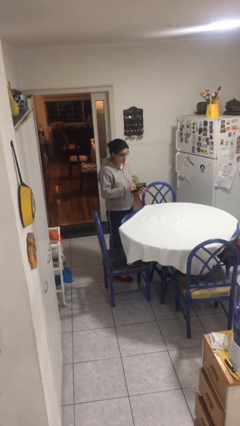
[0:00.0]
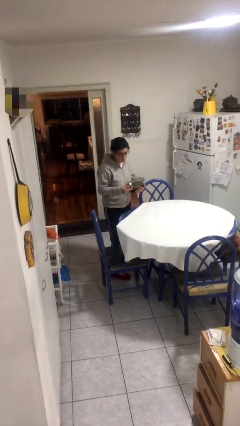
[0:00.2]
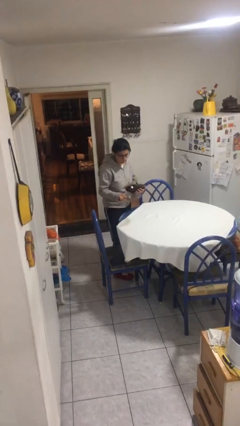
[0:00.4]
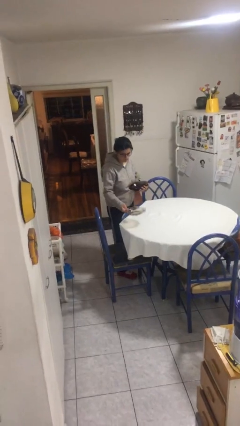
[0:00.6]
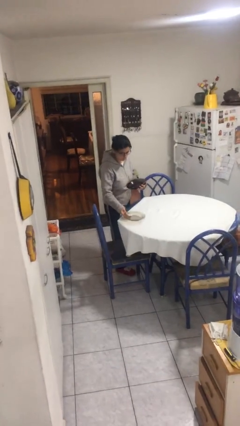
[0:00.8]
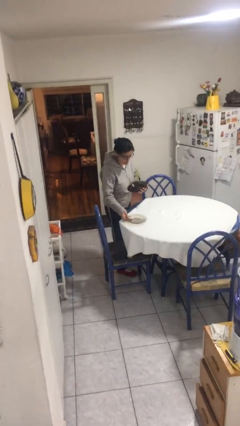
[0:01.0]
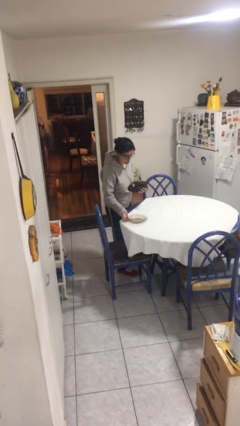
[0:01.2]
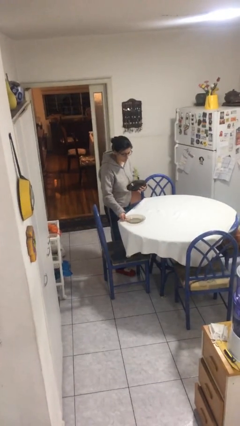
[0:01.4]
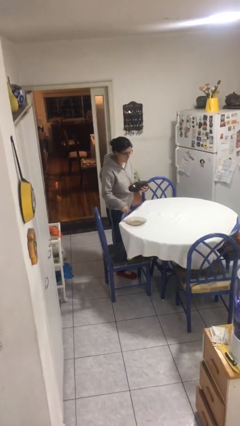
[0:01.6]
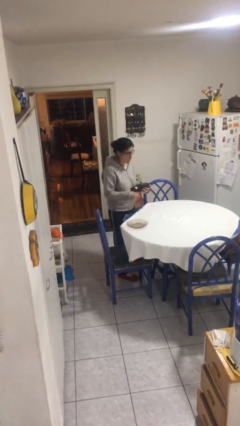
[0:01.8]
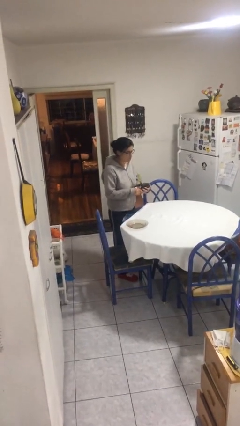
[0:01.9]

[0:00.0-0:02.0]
person sets table

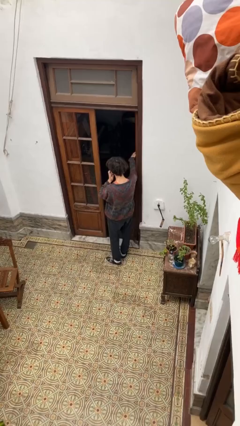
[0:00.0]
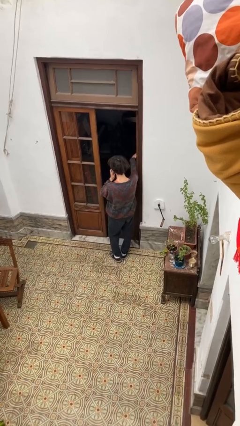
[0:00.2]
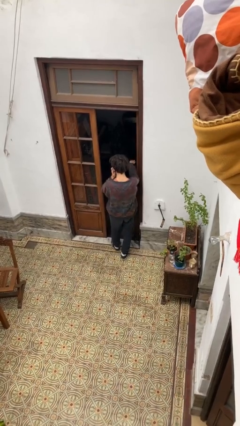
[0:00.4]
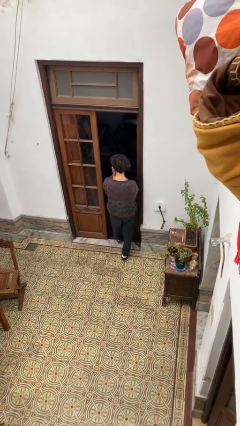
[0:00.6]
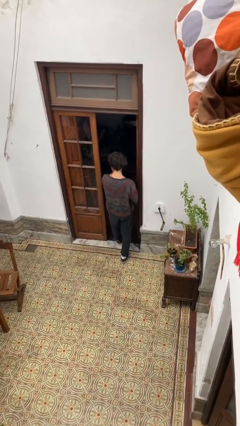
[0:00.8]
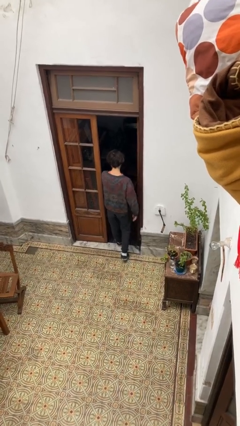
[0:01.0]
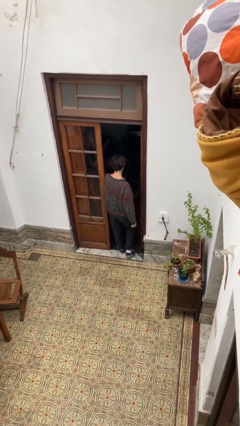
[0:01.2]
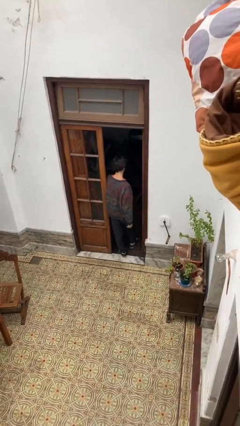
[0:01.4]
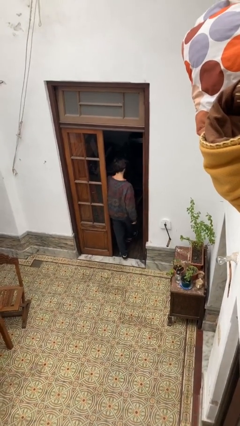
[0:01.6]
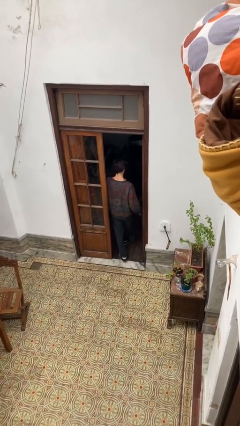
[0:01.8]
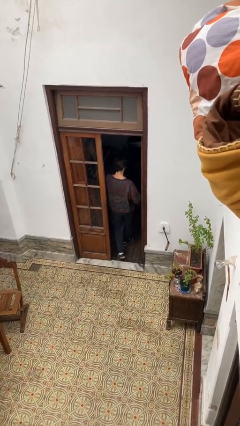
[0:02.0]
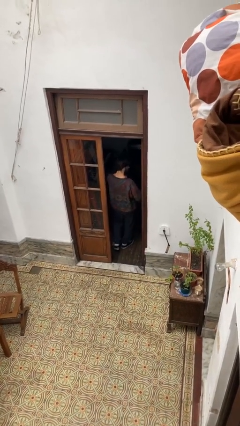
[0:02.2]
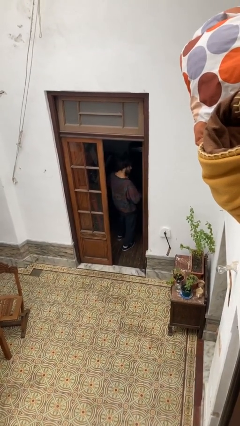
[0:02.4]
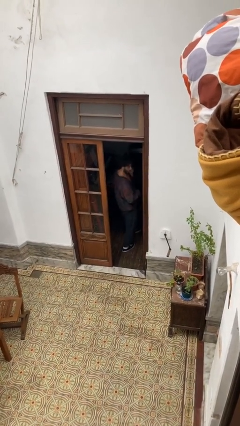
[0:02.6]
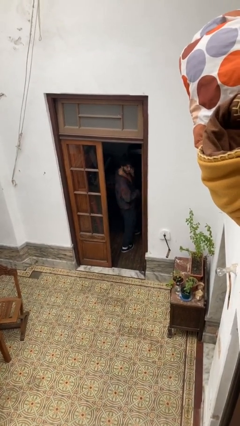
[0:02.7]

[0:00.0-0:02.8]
person exits scene through structure

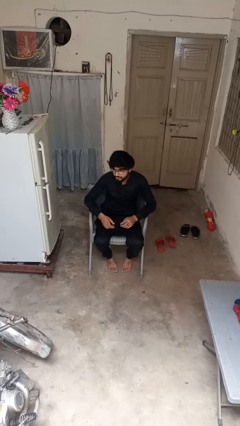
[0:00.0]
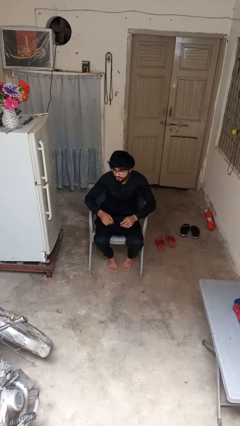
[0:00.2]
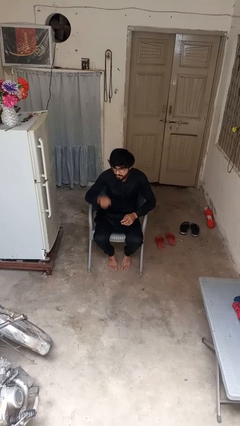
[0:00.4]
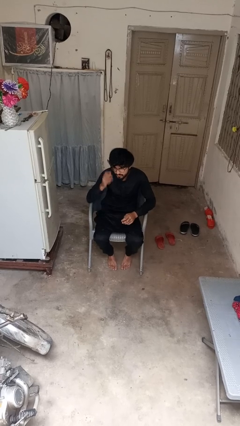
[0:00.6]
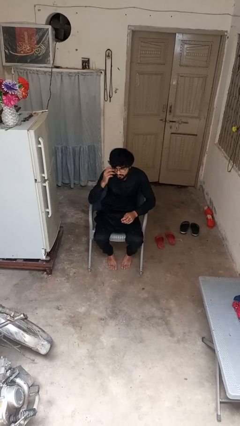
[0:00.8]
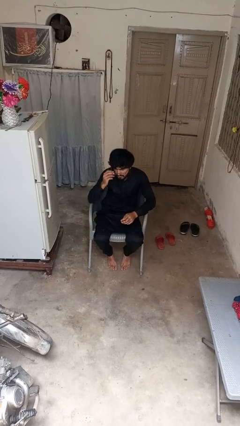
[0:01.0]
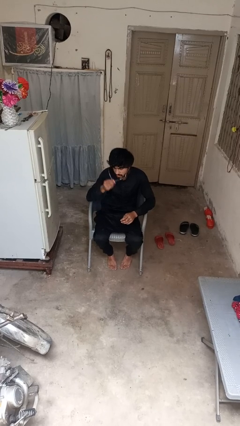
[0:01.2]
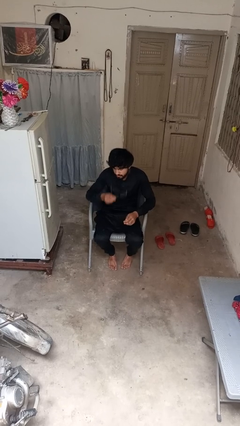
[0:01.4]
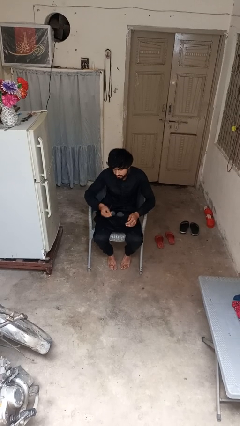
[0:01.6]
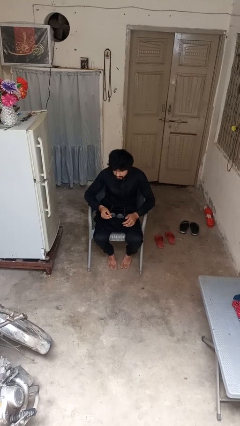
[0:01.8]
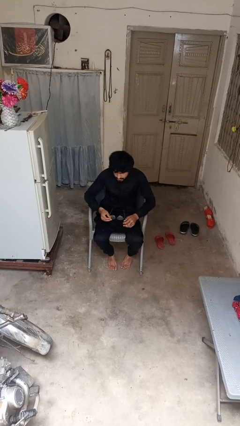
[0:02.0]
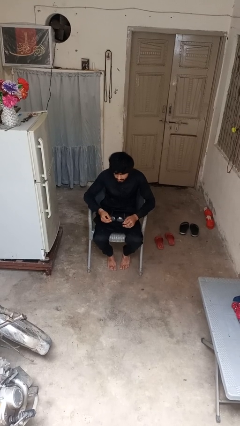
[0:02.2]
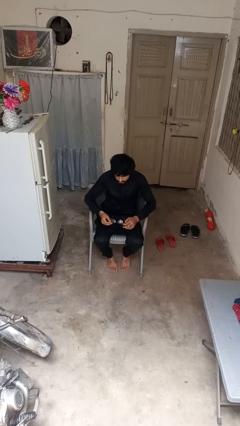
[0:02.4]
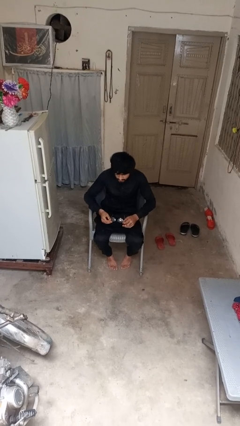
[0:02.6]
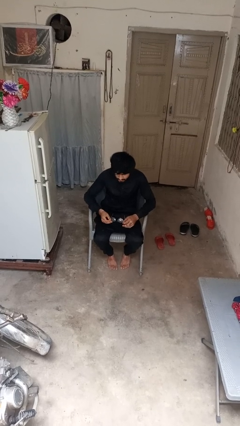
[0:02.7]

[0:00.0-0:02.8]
person takes off glasses

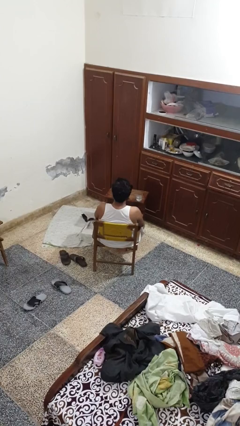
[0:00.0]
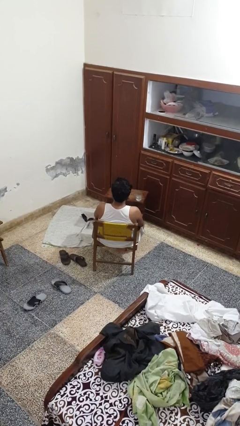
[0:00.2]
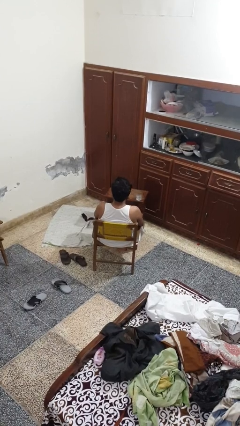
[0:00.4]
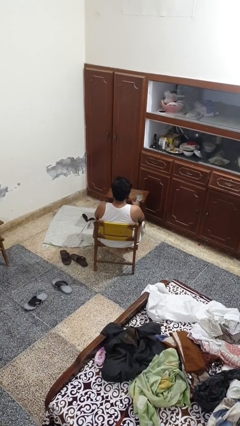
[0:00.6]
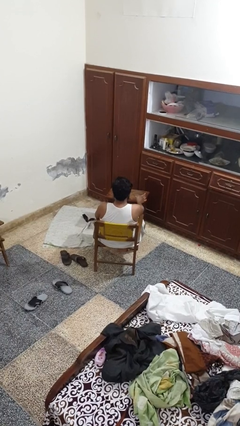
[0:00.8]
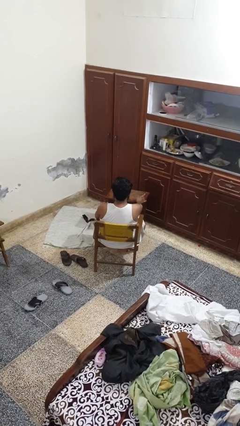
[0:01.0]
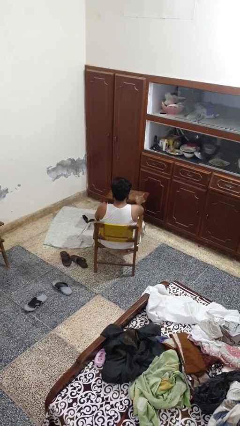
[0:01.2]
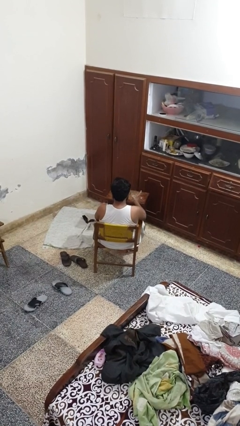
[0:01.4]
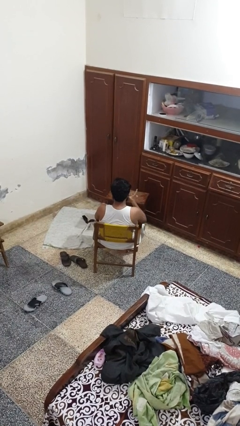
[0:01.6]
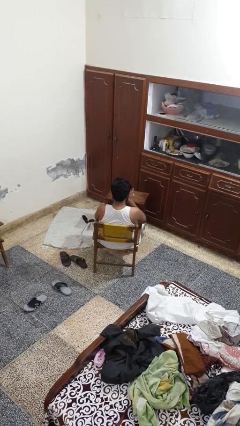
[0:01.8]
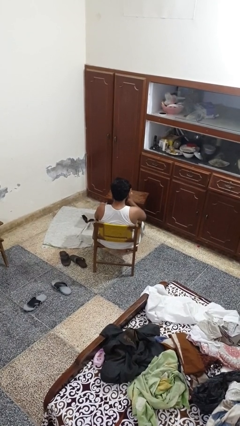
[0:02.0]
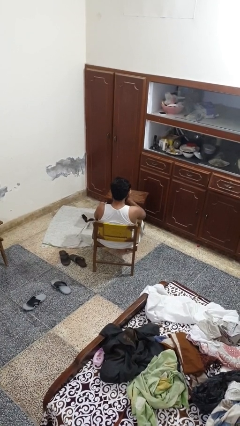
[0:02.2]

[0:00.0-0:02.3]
person drinks from cup

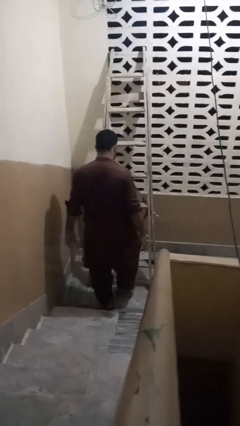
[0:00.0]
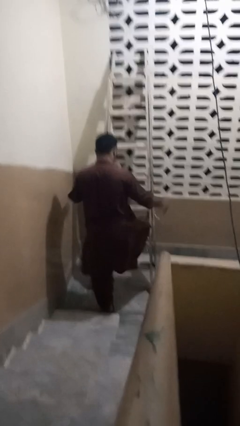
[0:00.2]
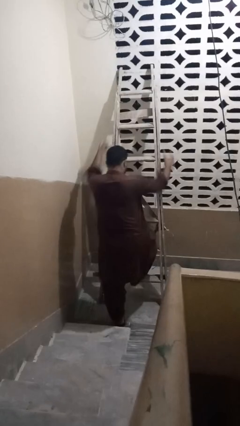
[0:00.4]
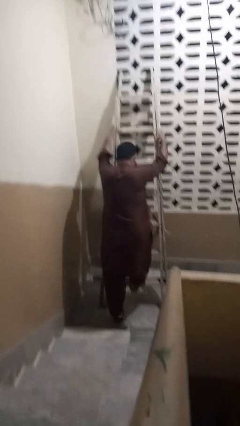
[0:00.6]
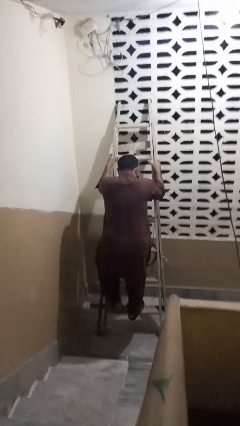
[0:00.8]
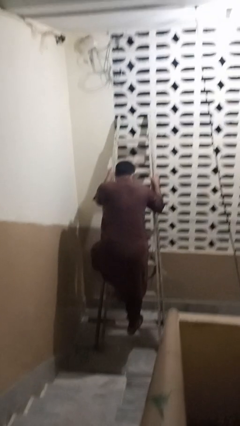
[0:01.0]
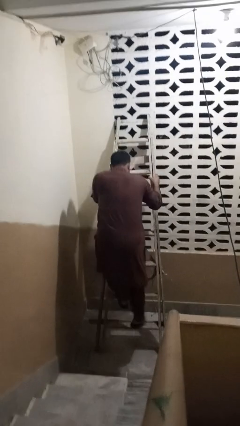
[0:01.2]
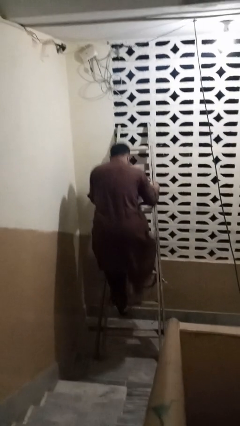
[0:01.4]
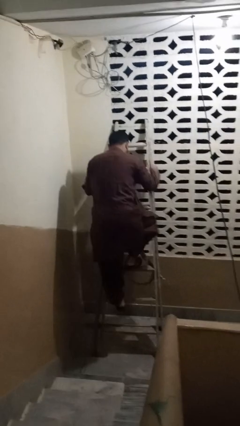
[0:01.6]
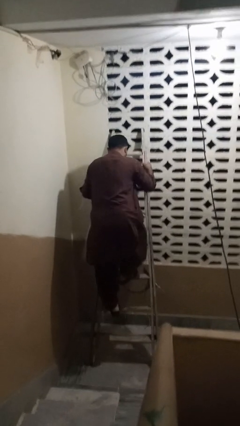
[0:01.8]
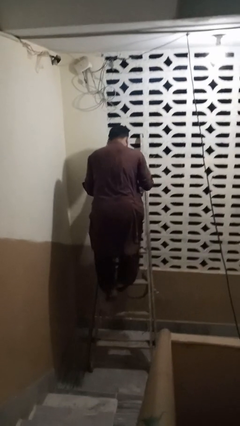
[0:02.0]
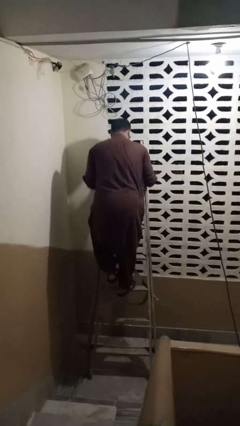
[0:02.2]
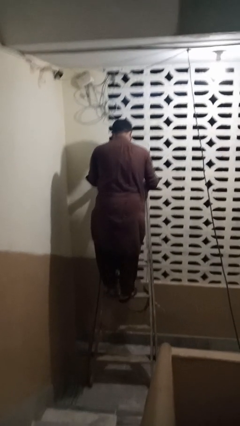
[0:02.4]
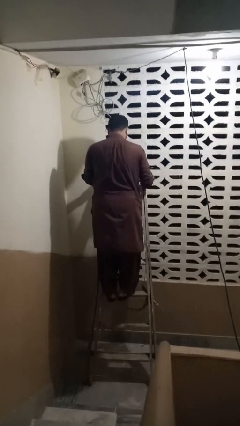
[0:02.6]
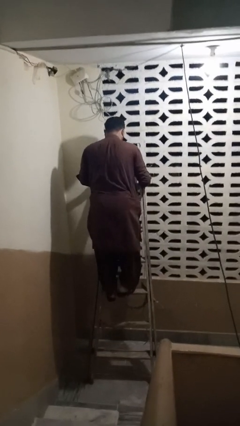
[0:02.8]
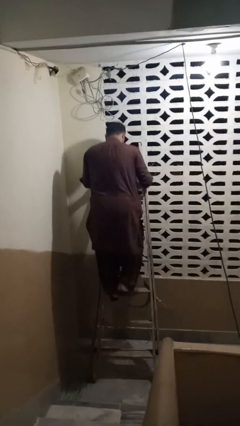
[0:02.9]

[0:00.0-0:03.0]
person climbs up ladder

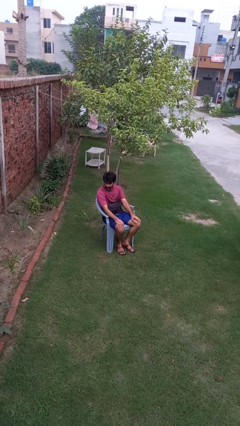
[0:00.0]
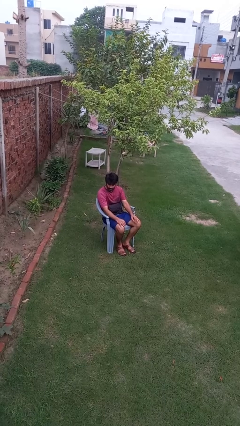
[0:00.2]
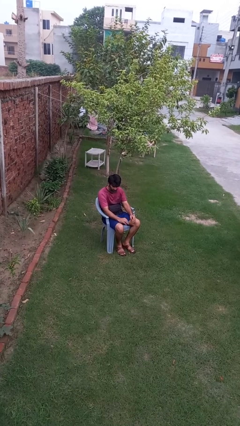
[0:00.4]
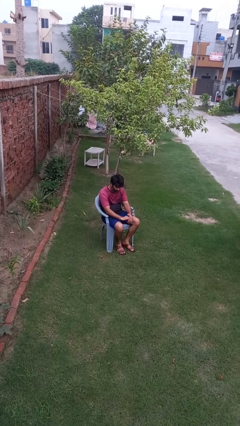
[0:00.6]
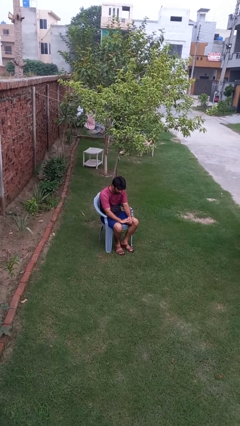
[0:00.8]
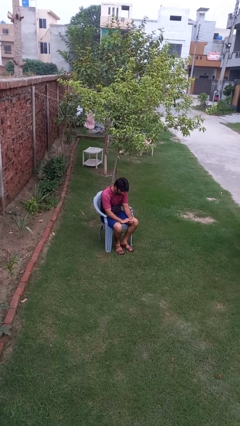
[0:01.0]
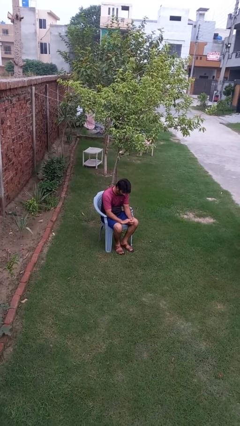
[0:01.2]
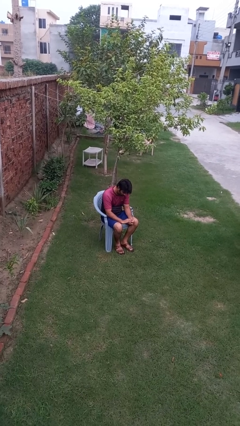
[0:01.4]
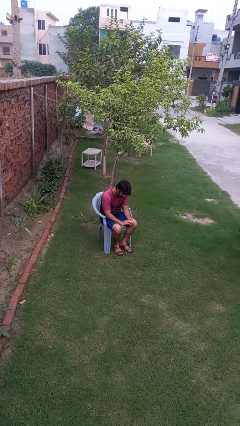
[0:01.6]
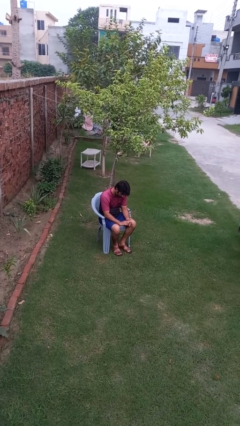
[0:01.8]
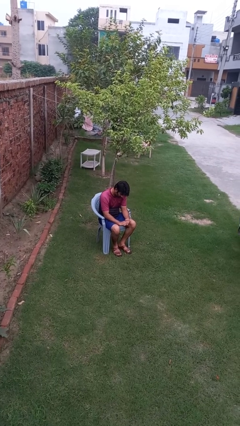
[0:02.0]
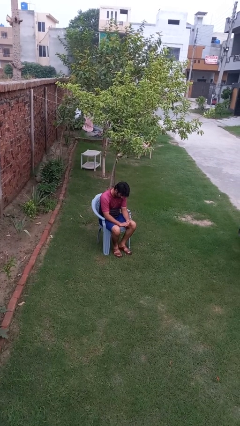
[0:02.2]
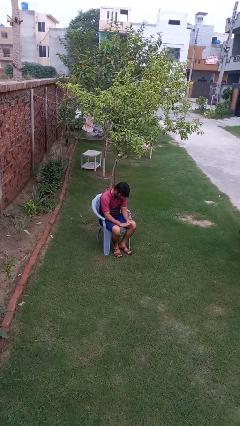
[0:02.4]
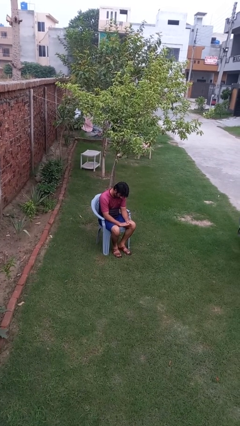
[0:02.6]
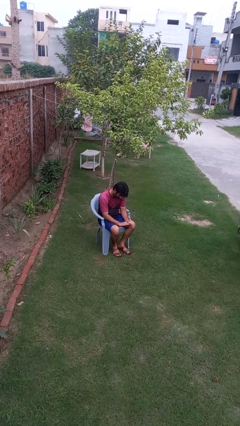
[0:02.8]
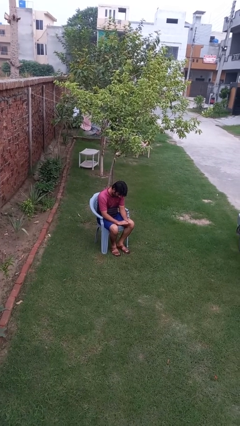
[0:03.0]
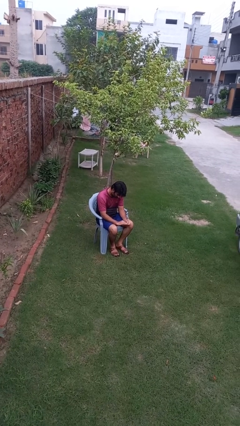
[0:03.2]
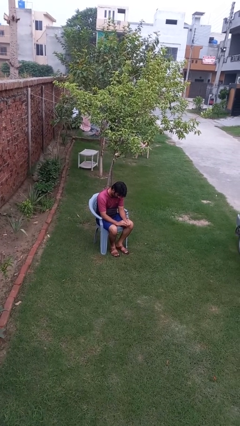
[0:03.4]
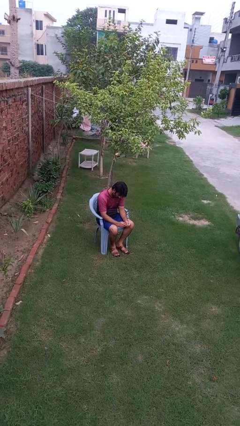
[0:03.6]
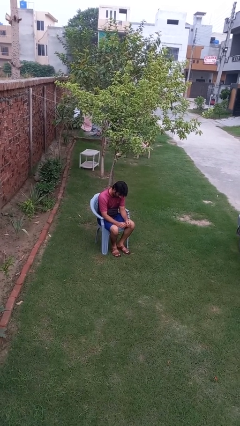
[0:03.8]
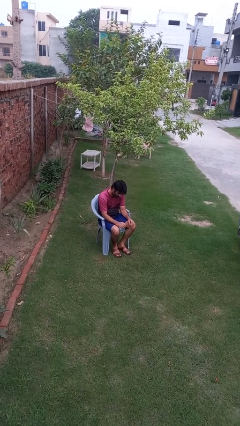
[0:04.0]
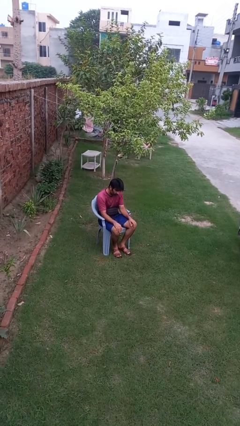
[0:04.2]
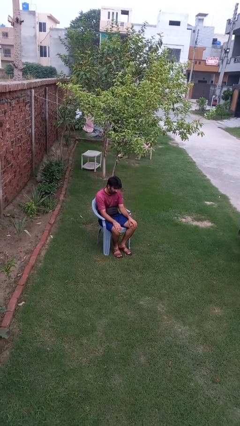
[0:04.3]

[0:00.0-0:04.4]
person looks at hands in lap
